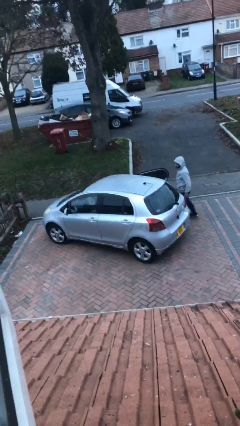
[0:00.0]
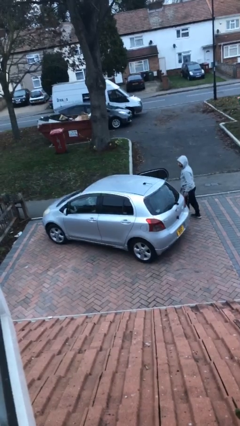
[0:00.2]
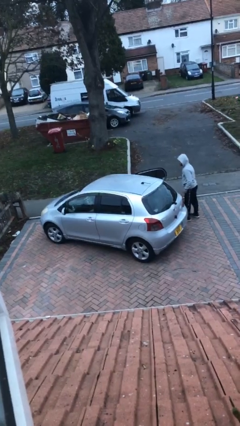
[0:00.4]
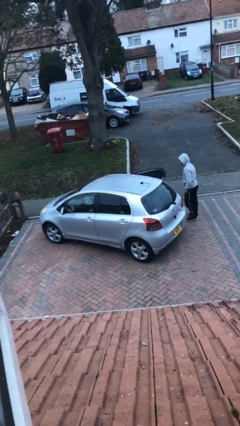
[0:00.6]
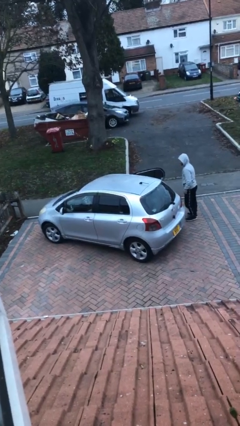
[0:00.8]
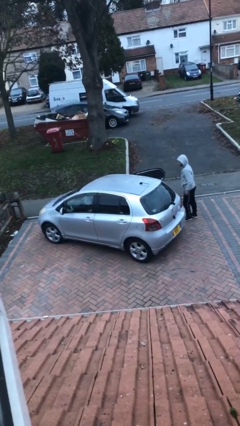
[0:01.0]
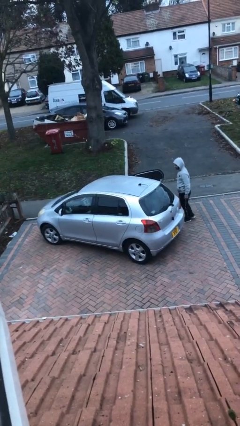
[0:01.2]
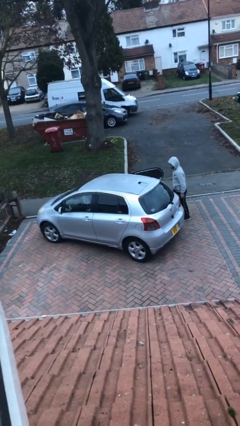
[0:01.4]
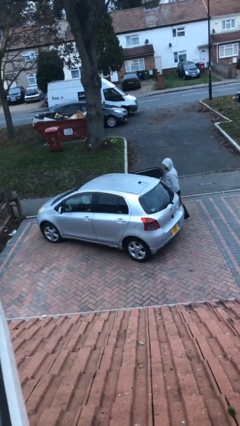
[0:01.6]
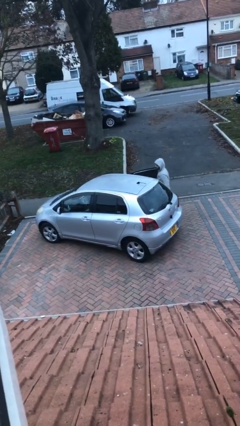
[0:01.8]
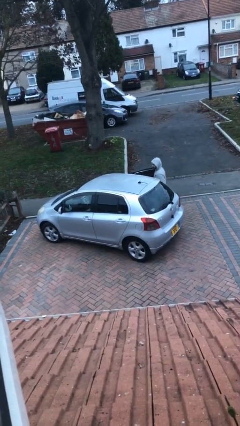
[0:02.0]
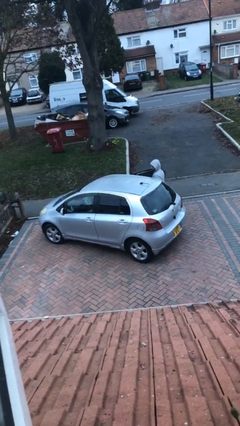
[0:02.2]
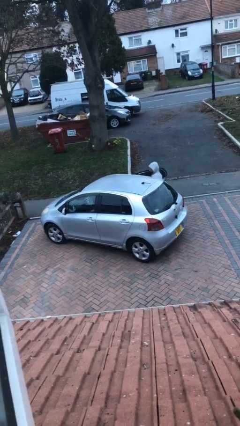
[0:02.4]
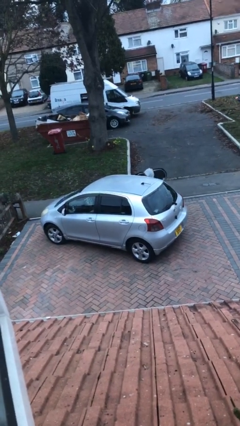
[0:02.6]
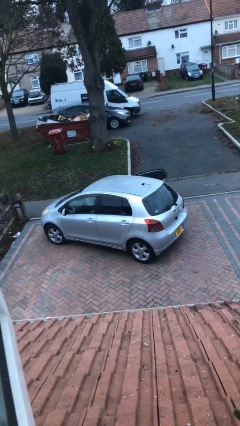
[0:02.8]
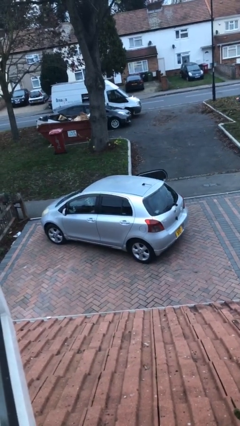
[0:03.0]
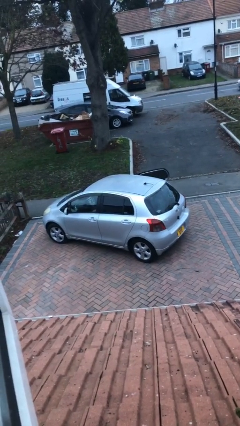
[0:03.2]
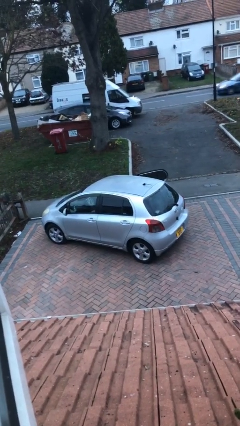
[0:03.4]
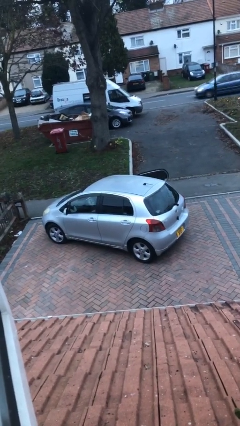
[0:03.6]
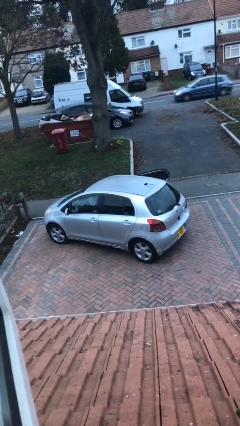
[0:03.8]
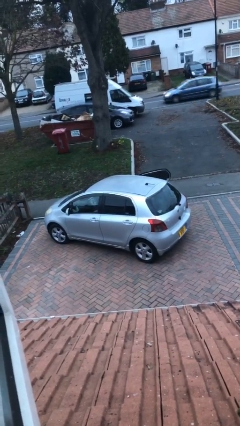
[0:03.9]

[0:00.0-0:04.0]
car picks up person

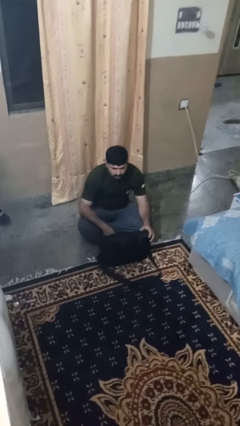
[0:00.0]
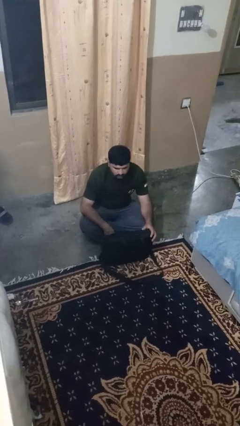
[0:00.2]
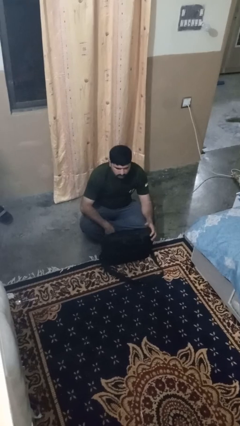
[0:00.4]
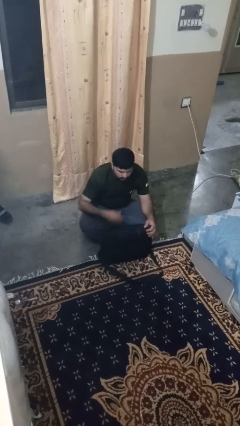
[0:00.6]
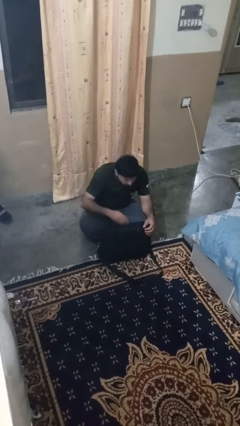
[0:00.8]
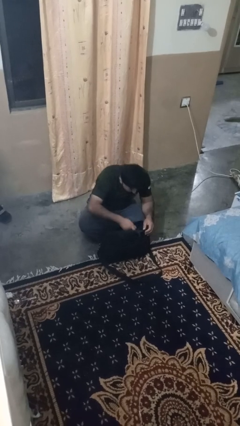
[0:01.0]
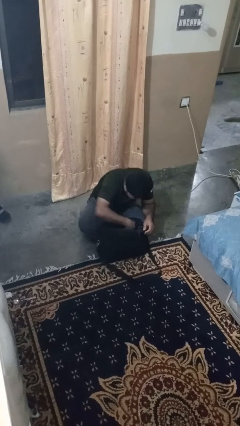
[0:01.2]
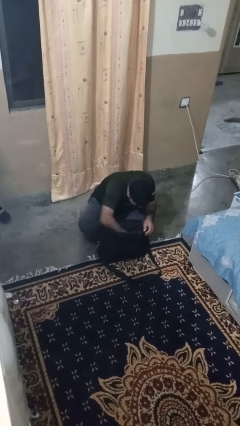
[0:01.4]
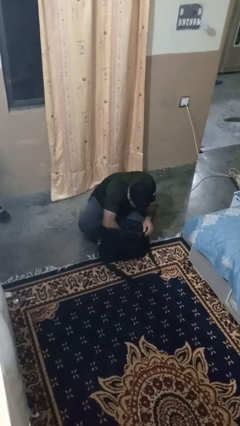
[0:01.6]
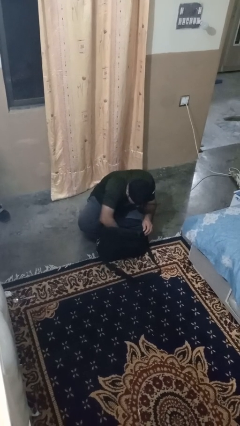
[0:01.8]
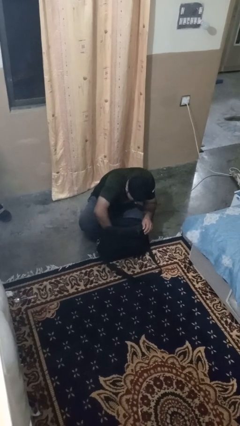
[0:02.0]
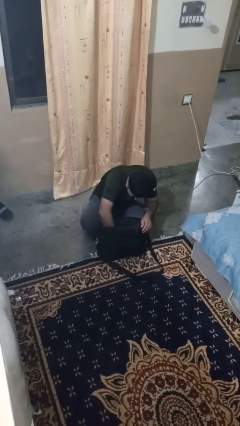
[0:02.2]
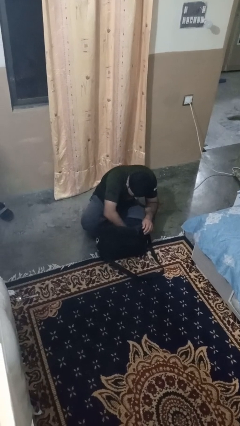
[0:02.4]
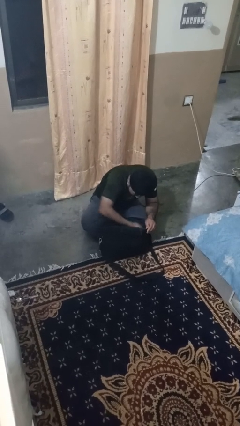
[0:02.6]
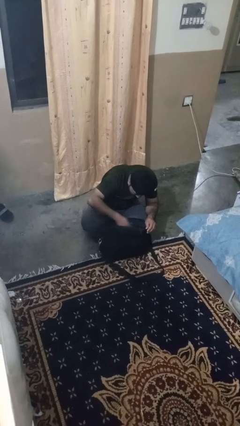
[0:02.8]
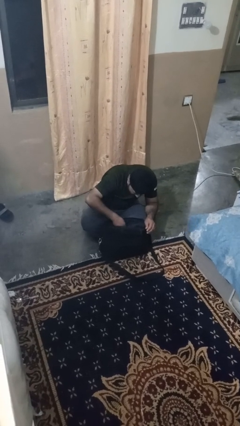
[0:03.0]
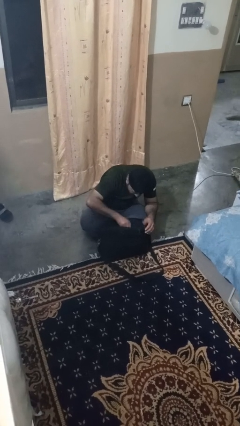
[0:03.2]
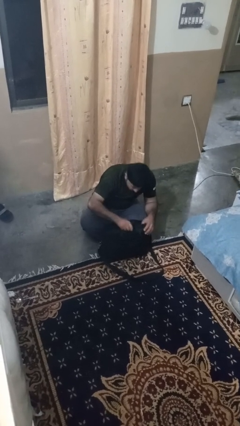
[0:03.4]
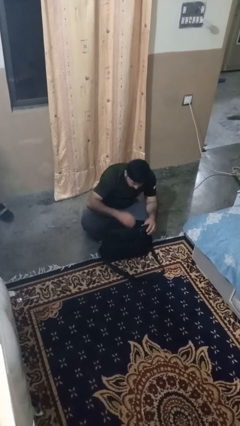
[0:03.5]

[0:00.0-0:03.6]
person searches in bag

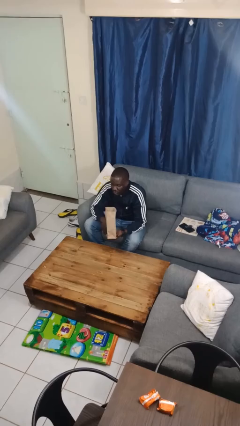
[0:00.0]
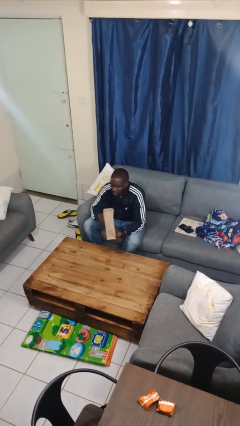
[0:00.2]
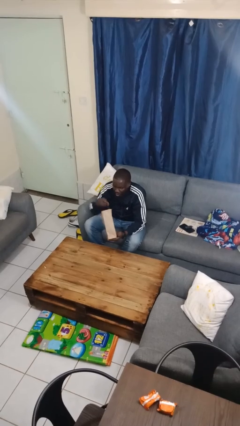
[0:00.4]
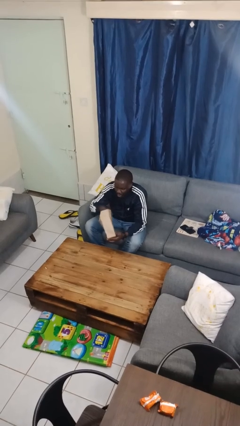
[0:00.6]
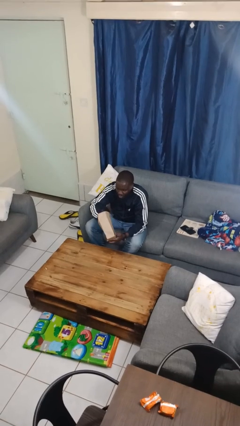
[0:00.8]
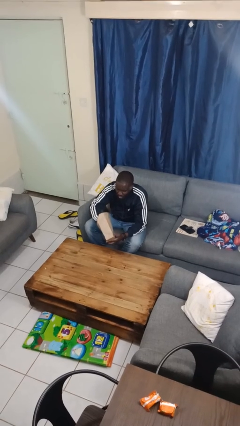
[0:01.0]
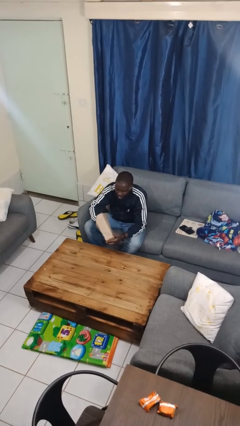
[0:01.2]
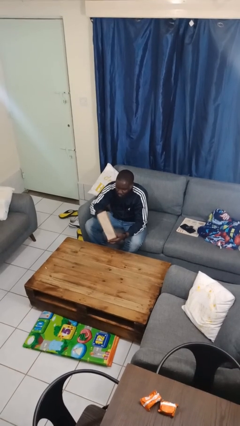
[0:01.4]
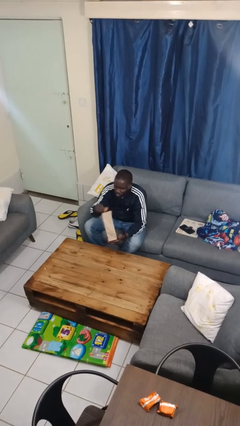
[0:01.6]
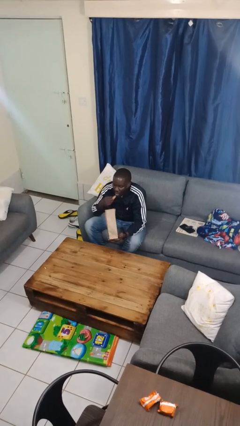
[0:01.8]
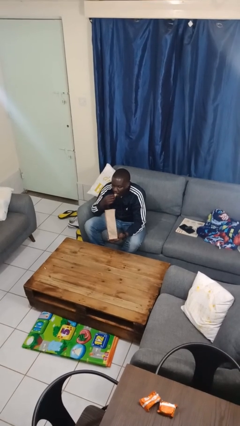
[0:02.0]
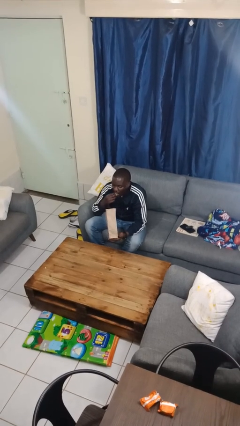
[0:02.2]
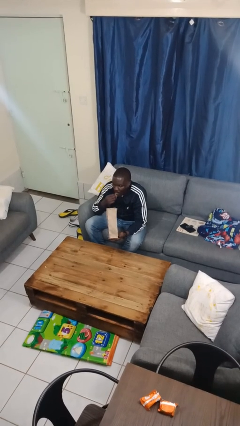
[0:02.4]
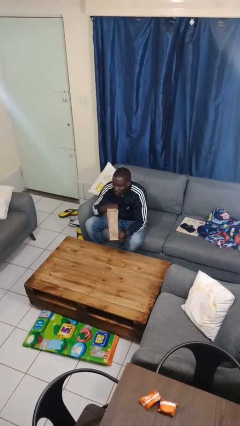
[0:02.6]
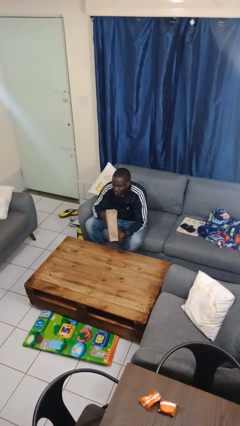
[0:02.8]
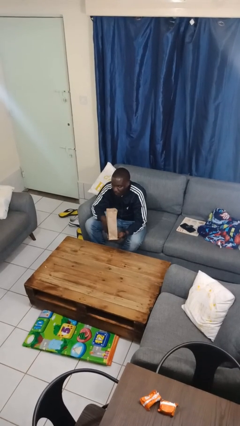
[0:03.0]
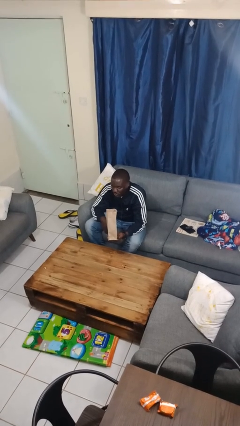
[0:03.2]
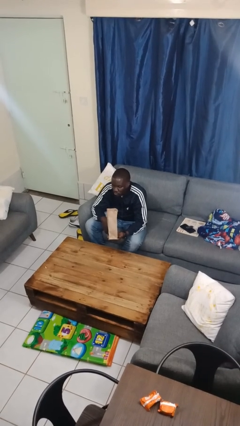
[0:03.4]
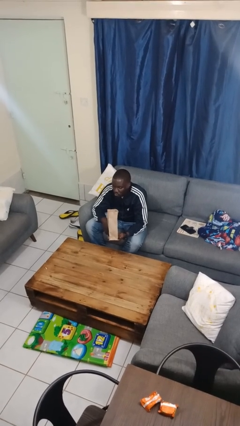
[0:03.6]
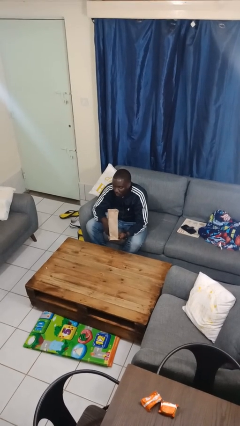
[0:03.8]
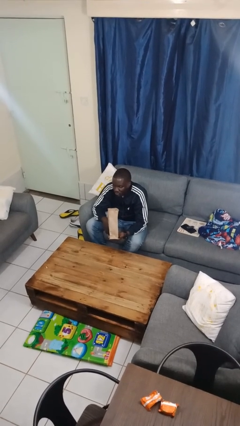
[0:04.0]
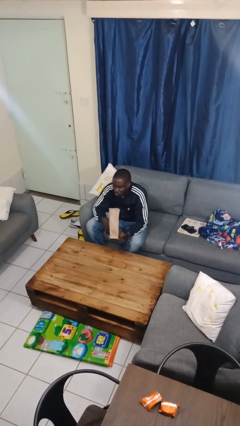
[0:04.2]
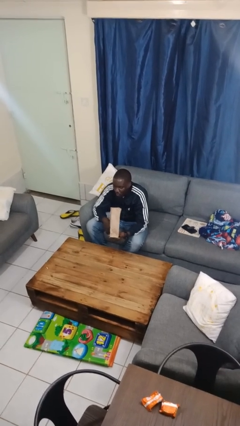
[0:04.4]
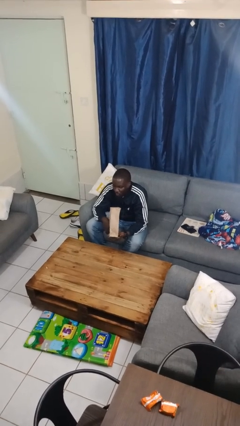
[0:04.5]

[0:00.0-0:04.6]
person eats snack from bag

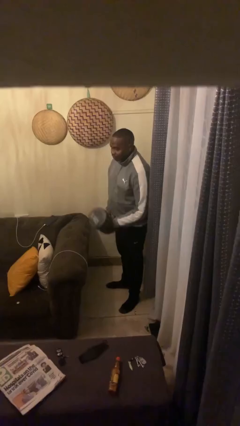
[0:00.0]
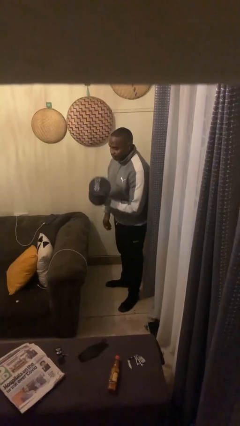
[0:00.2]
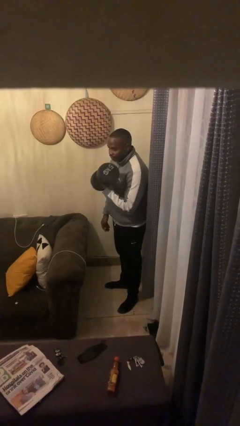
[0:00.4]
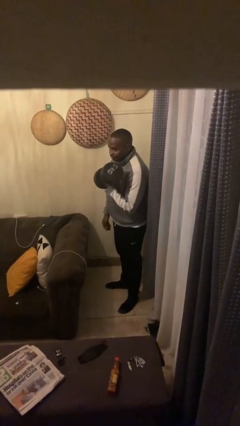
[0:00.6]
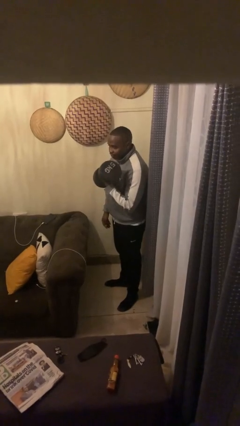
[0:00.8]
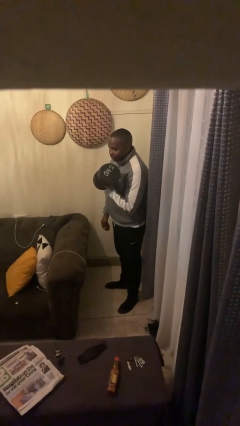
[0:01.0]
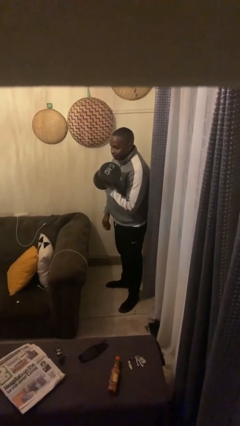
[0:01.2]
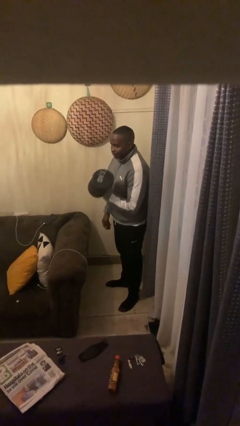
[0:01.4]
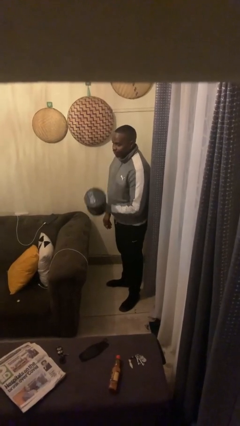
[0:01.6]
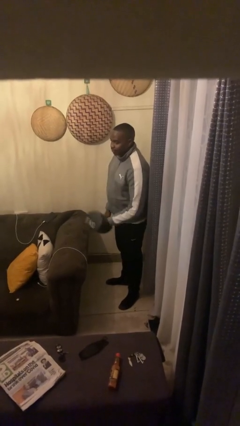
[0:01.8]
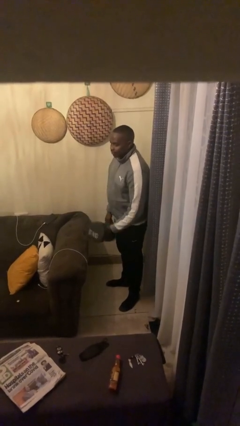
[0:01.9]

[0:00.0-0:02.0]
person lifts dumbbells

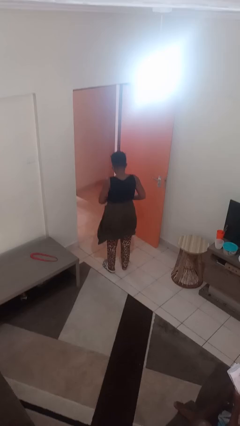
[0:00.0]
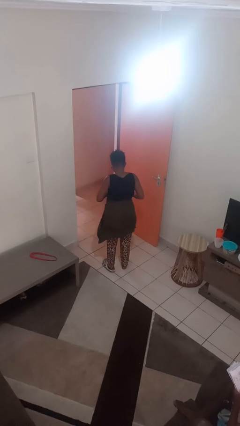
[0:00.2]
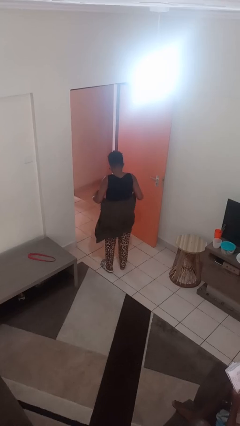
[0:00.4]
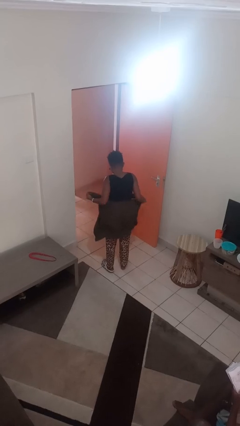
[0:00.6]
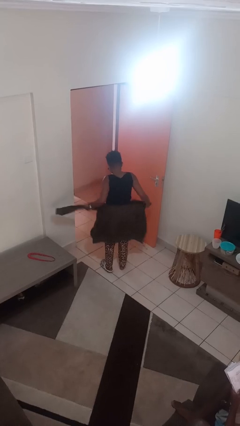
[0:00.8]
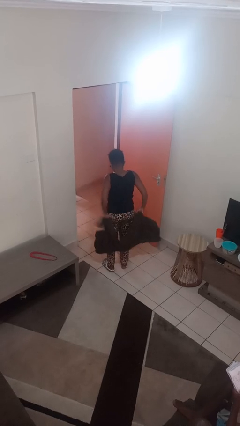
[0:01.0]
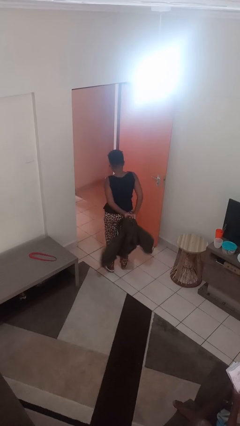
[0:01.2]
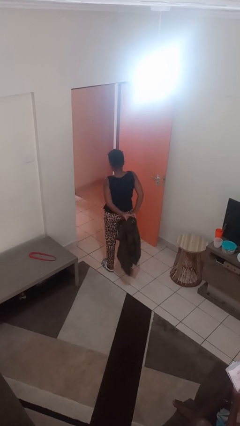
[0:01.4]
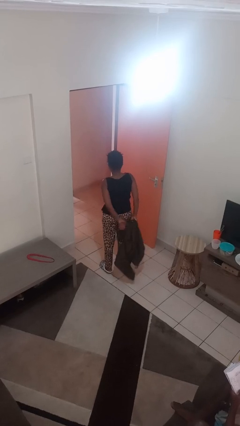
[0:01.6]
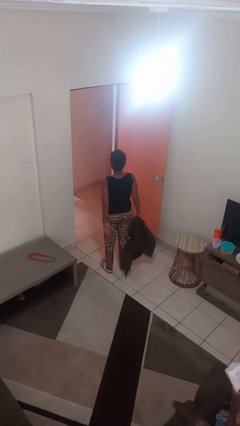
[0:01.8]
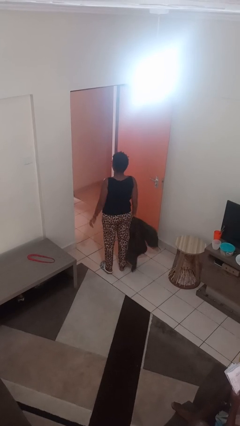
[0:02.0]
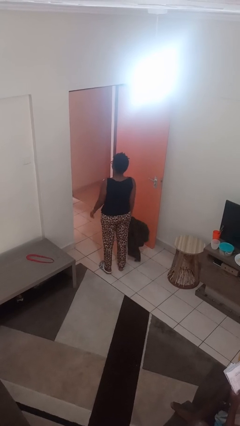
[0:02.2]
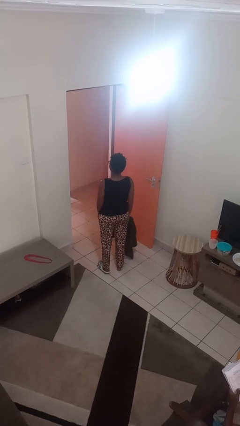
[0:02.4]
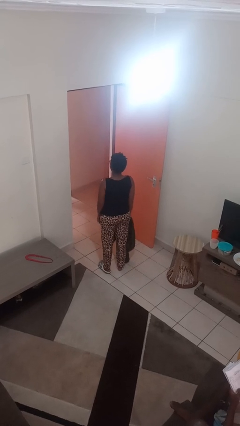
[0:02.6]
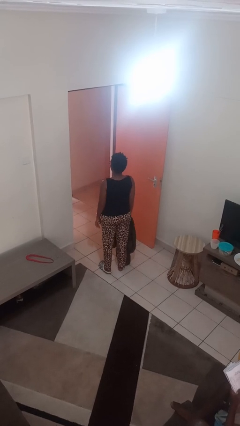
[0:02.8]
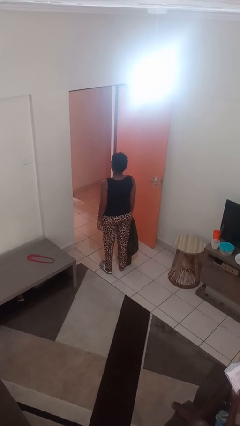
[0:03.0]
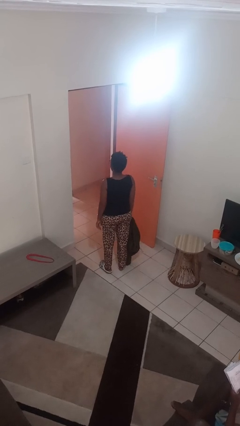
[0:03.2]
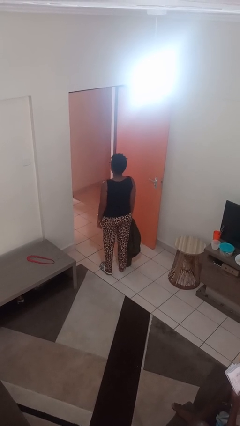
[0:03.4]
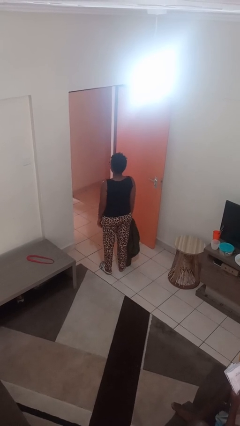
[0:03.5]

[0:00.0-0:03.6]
person unties jacket around waist

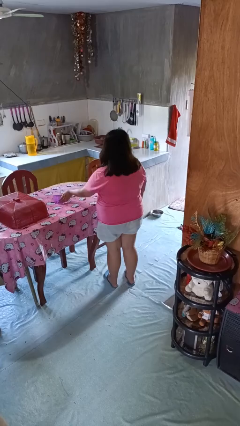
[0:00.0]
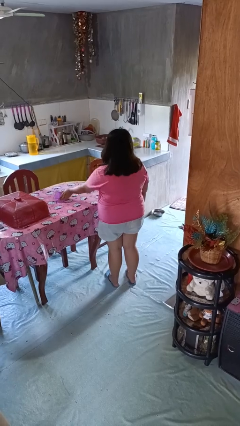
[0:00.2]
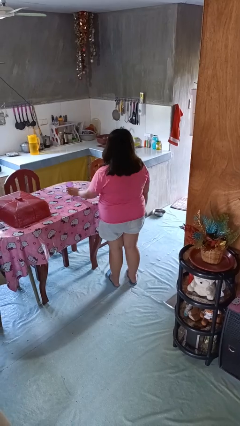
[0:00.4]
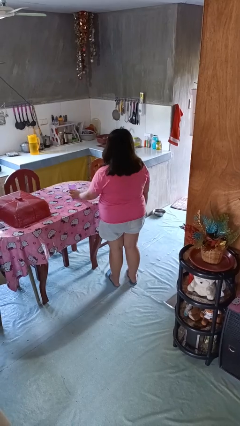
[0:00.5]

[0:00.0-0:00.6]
person sets upright glass
